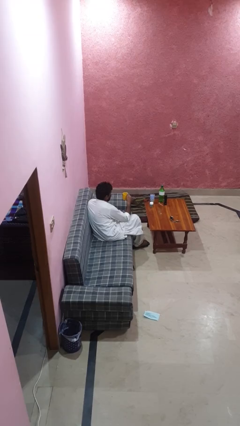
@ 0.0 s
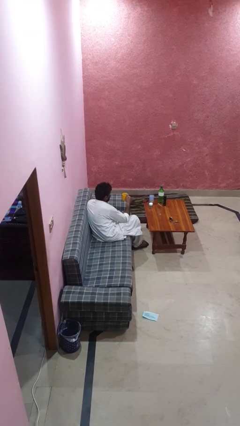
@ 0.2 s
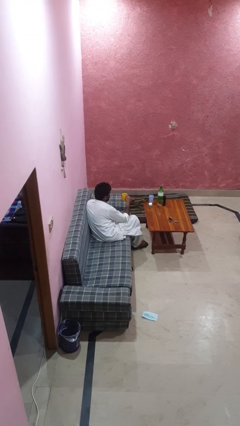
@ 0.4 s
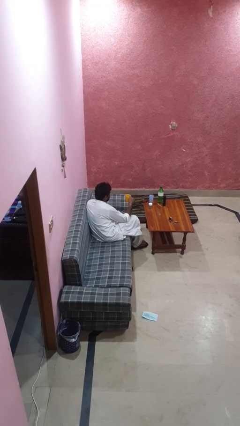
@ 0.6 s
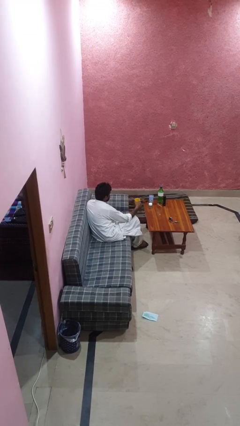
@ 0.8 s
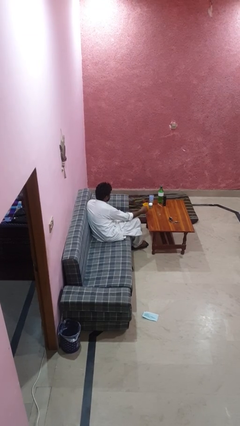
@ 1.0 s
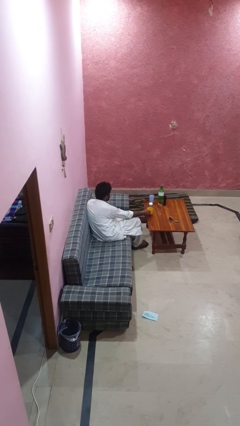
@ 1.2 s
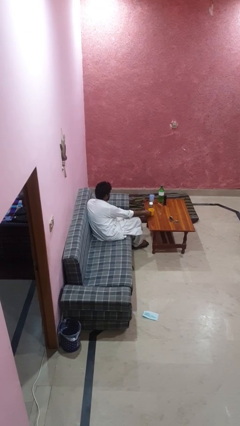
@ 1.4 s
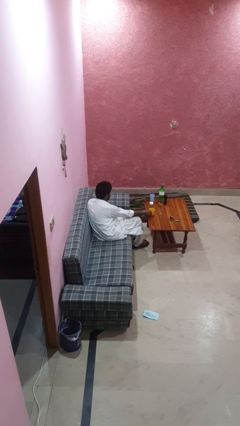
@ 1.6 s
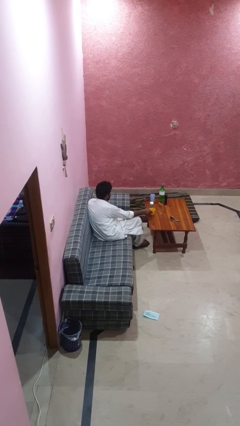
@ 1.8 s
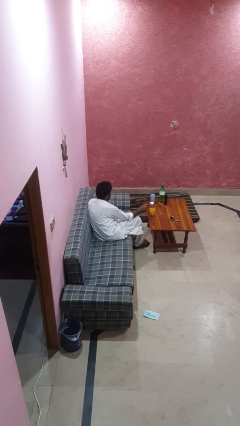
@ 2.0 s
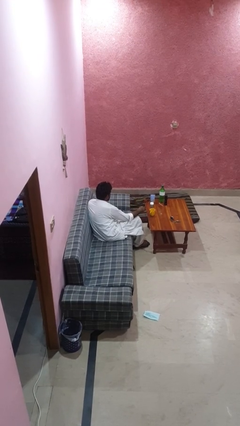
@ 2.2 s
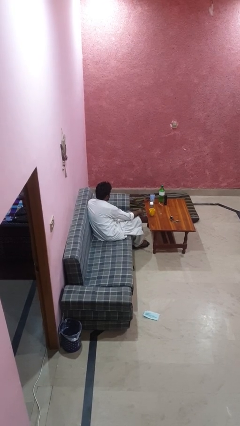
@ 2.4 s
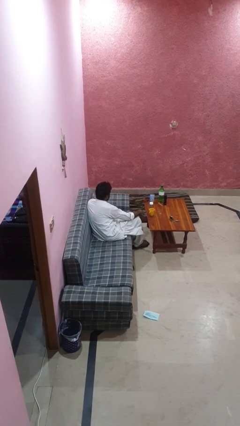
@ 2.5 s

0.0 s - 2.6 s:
person puts down object on table

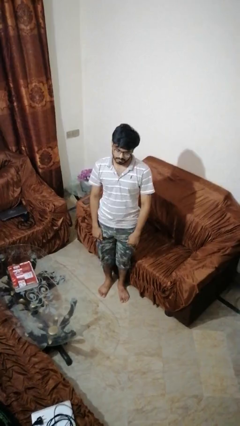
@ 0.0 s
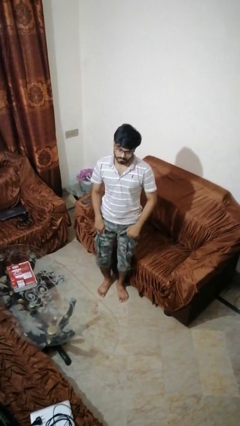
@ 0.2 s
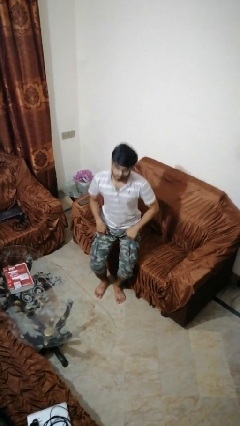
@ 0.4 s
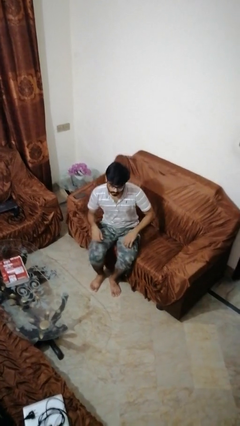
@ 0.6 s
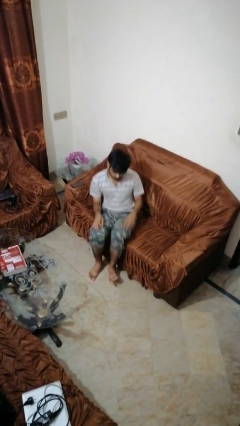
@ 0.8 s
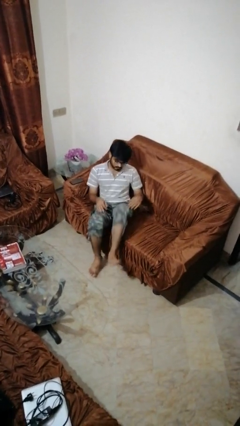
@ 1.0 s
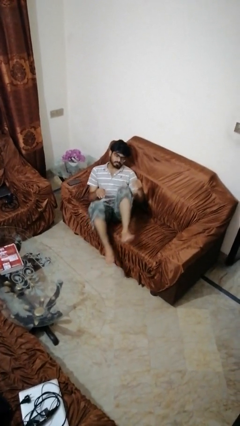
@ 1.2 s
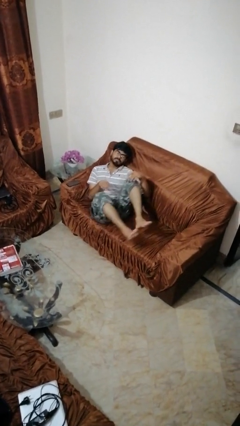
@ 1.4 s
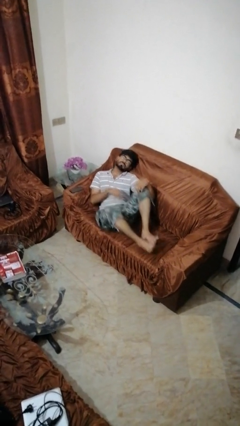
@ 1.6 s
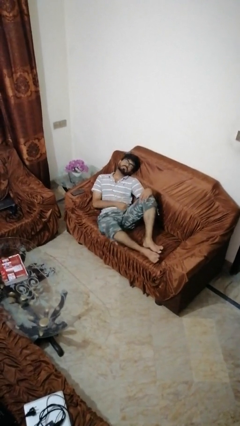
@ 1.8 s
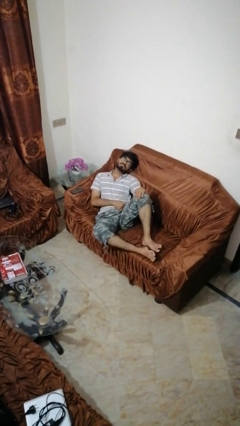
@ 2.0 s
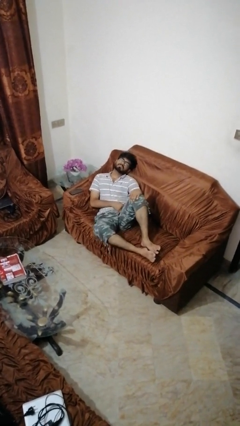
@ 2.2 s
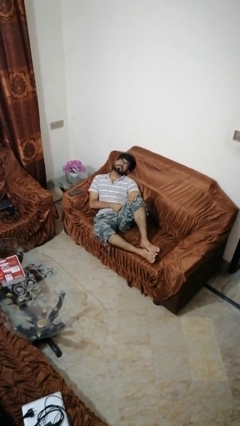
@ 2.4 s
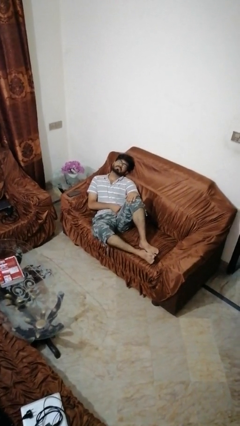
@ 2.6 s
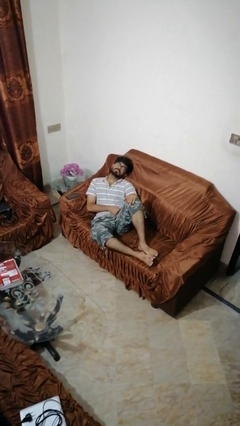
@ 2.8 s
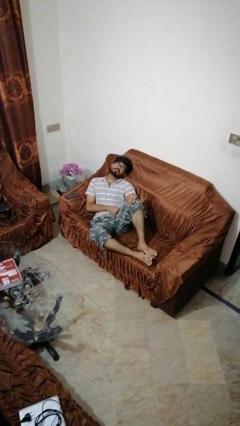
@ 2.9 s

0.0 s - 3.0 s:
person lies down on couch

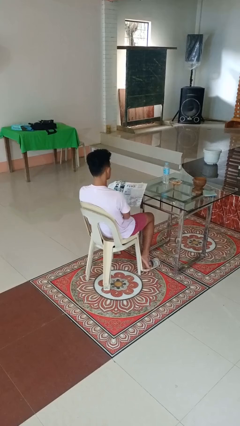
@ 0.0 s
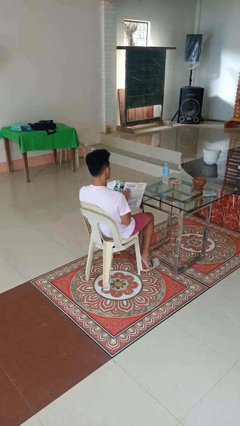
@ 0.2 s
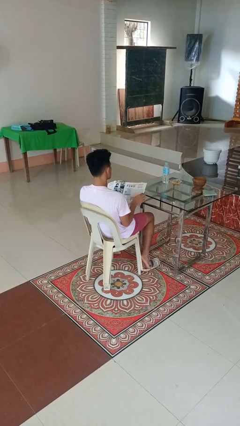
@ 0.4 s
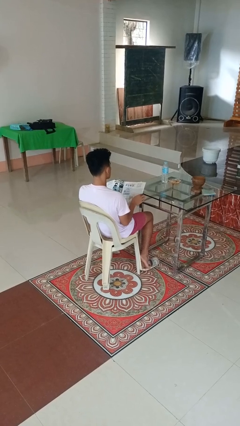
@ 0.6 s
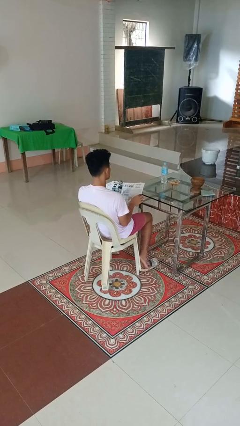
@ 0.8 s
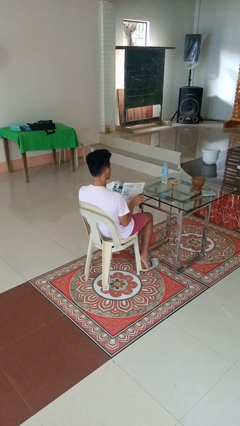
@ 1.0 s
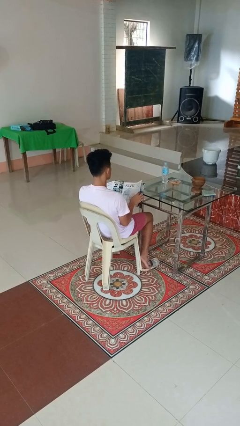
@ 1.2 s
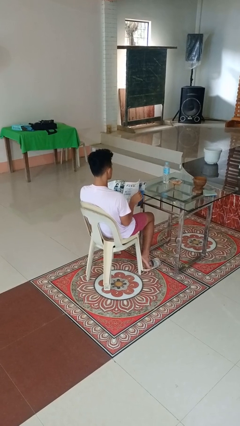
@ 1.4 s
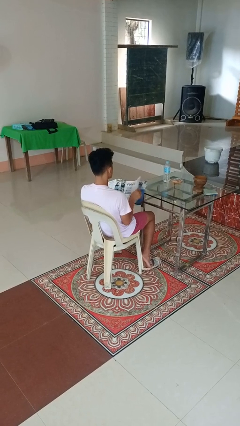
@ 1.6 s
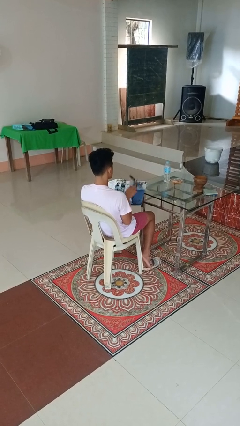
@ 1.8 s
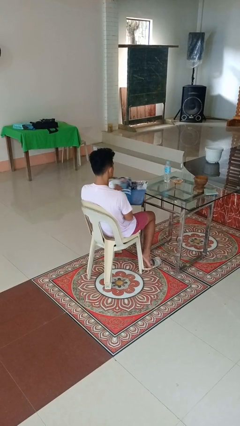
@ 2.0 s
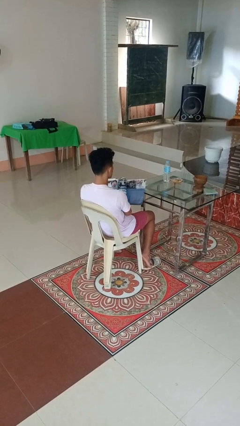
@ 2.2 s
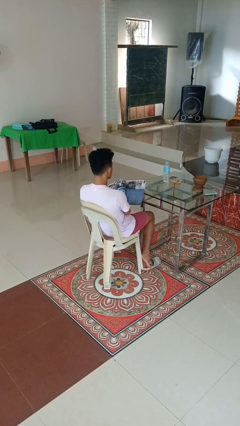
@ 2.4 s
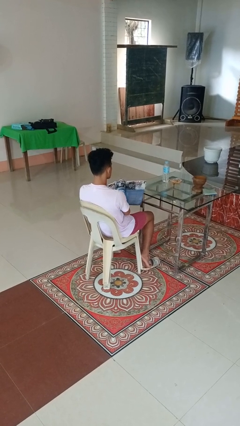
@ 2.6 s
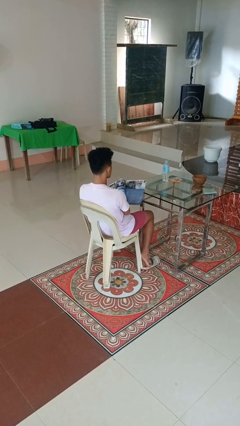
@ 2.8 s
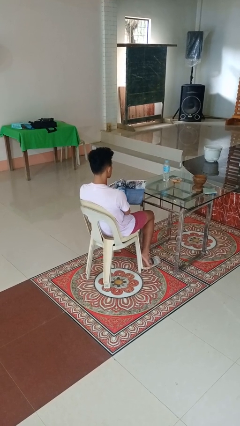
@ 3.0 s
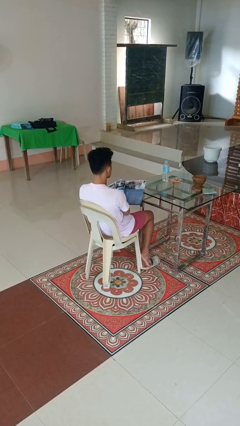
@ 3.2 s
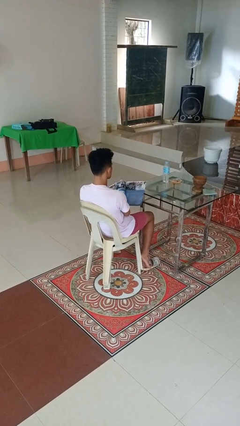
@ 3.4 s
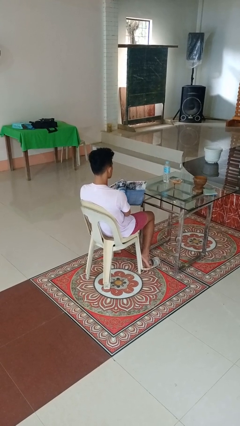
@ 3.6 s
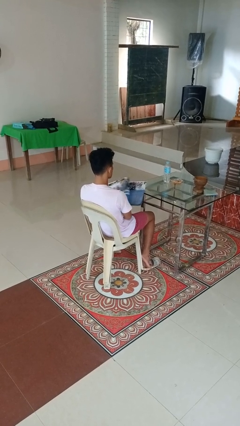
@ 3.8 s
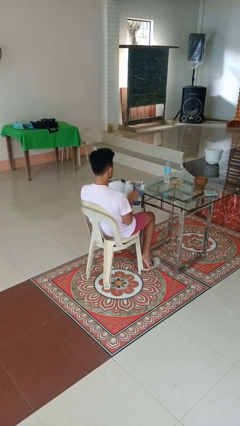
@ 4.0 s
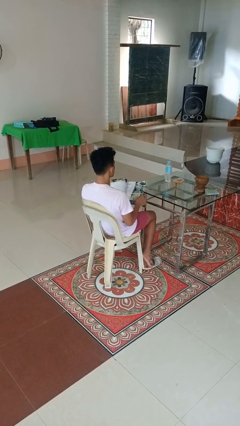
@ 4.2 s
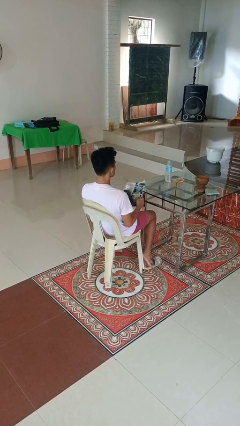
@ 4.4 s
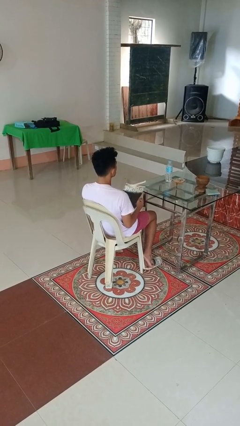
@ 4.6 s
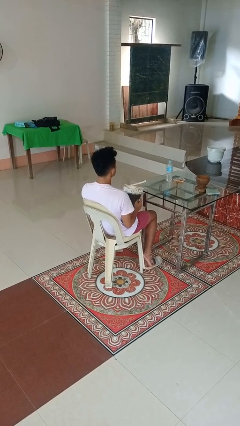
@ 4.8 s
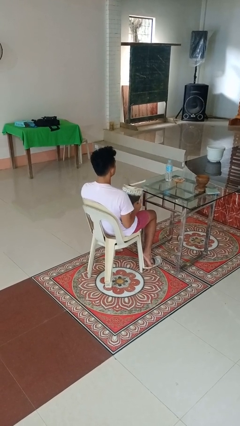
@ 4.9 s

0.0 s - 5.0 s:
person reads magazine

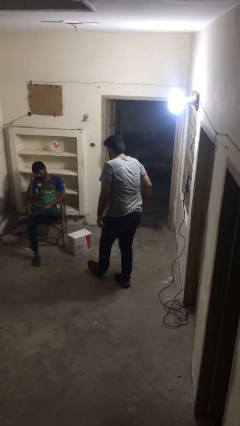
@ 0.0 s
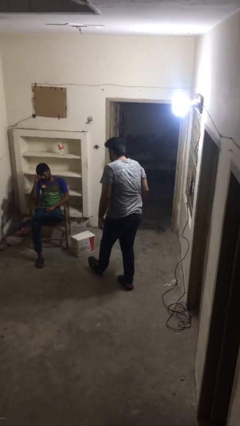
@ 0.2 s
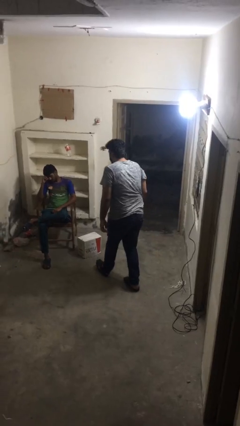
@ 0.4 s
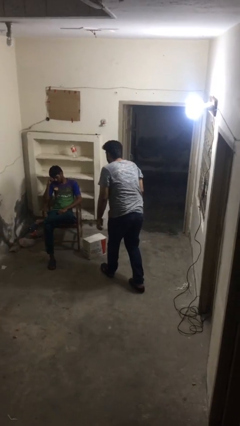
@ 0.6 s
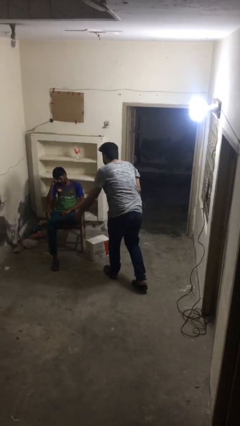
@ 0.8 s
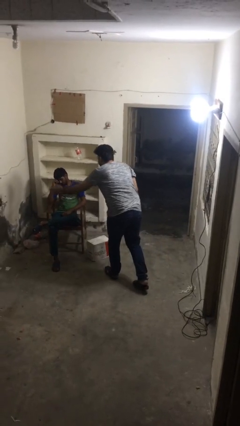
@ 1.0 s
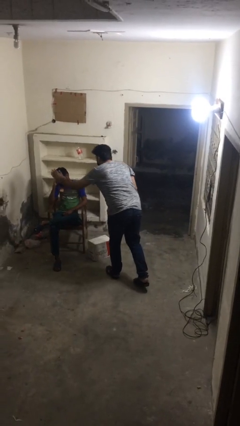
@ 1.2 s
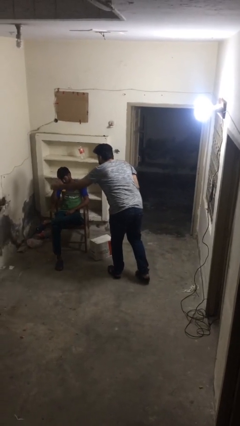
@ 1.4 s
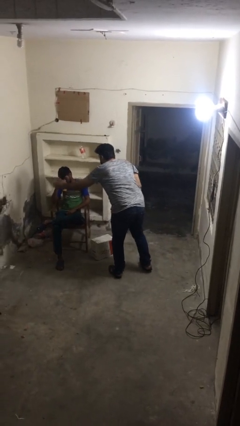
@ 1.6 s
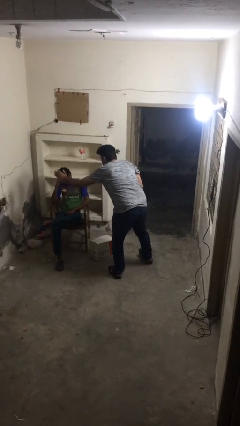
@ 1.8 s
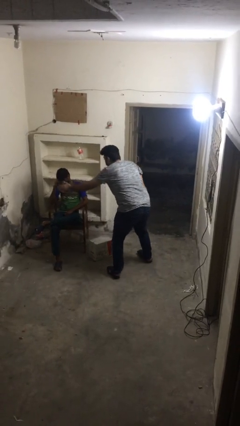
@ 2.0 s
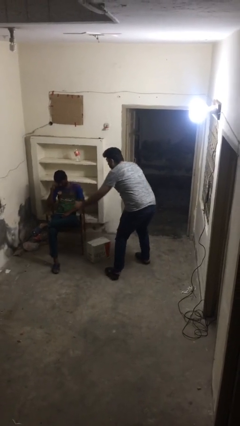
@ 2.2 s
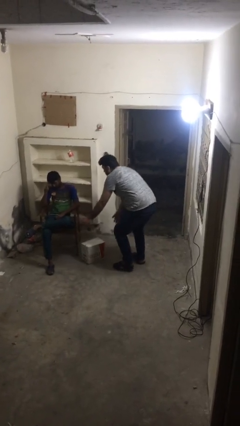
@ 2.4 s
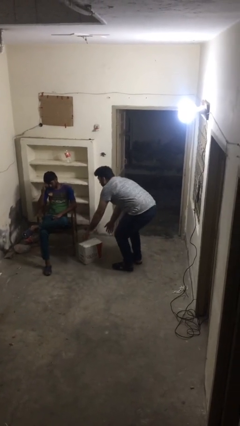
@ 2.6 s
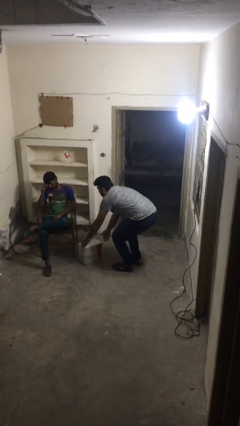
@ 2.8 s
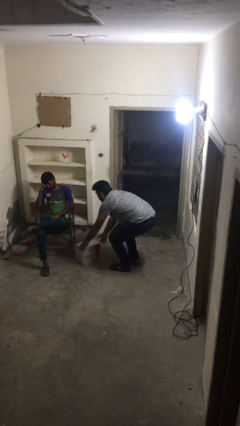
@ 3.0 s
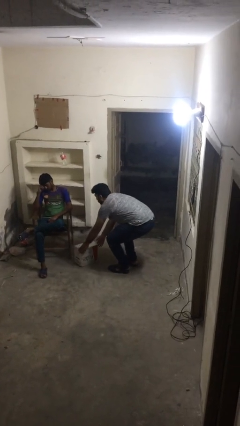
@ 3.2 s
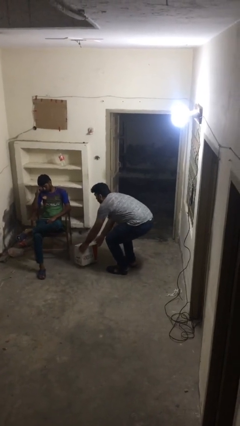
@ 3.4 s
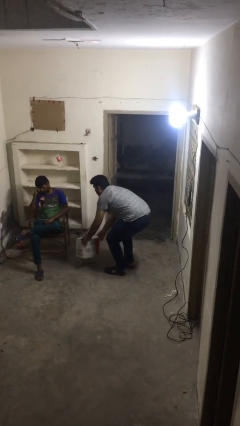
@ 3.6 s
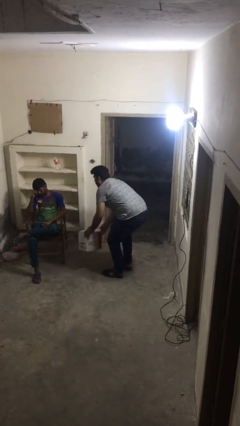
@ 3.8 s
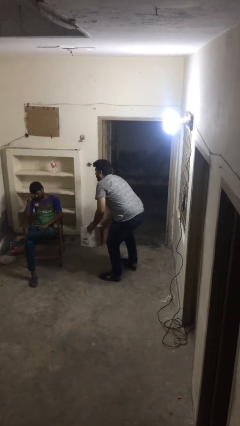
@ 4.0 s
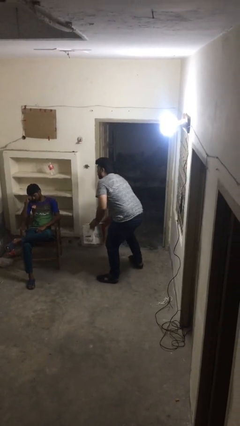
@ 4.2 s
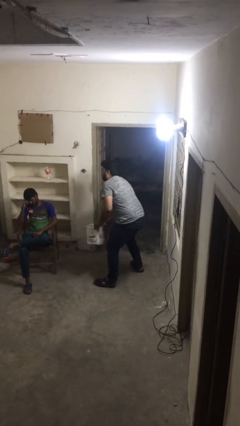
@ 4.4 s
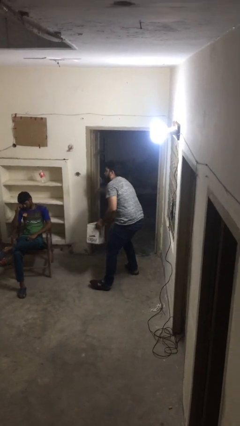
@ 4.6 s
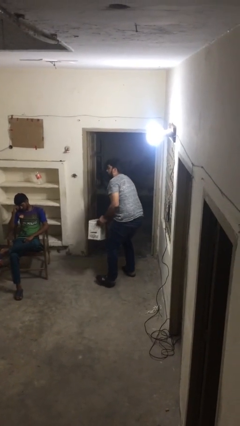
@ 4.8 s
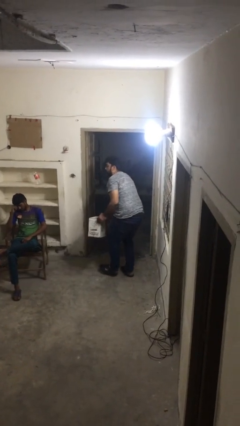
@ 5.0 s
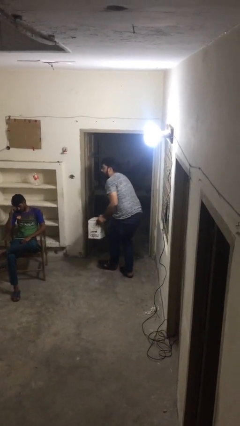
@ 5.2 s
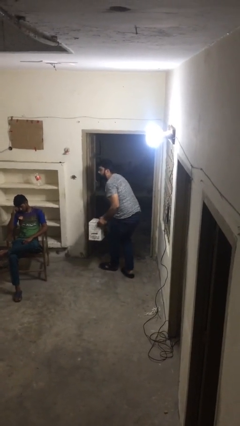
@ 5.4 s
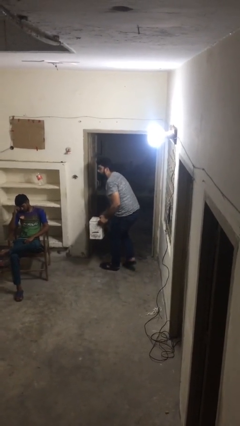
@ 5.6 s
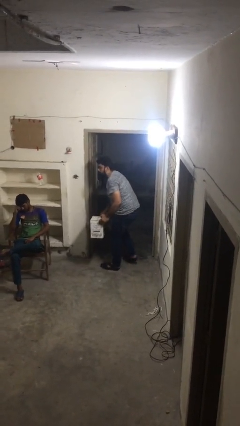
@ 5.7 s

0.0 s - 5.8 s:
person steals object from person

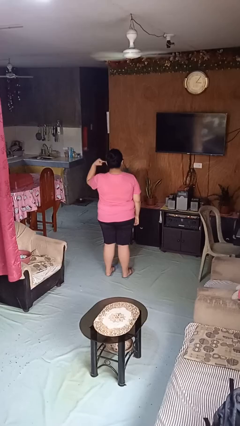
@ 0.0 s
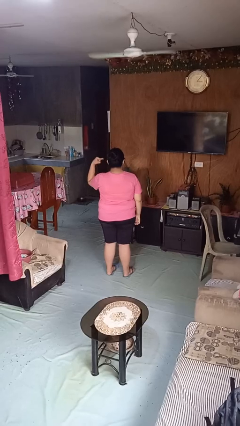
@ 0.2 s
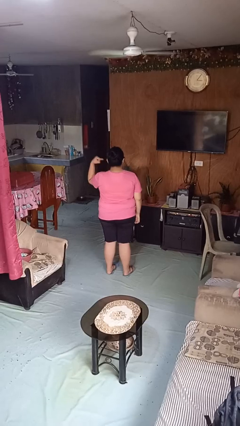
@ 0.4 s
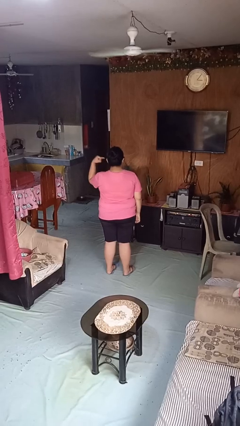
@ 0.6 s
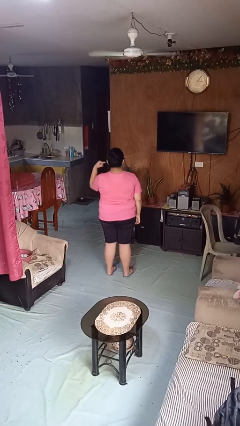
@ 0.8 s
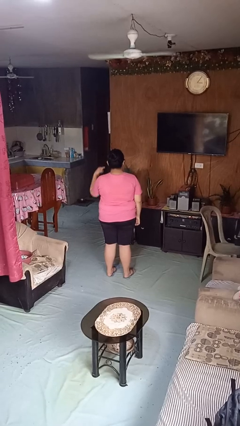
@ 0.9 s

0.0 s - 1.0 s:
person gestures listen closely
